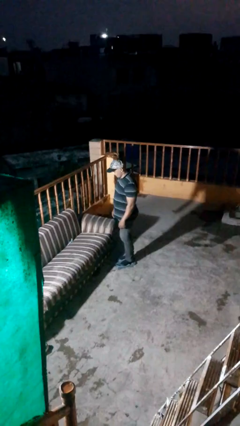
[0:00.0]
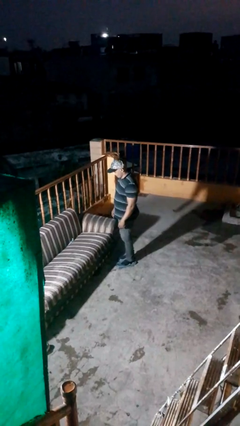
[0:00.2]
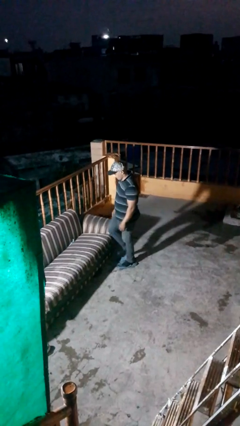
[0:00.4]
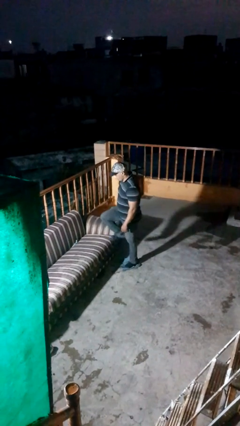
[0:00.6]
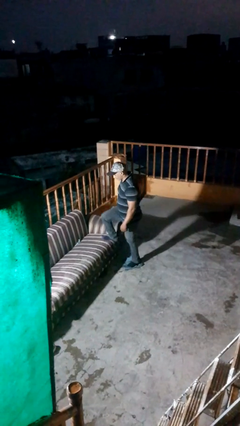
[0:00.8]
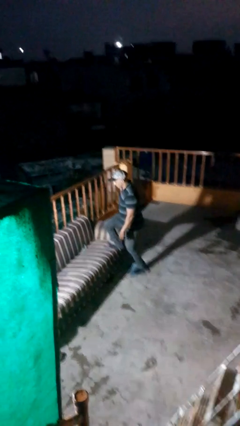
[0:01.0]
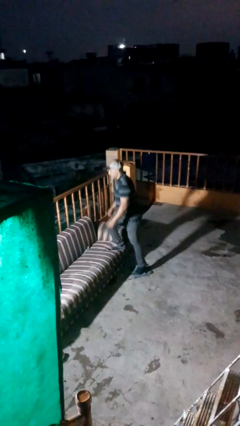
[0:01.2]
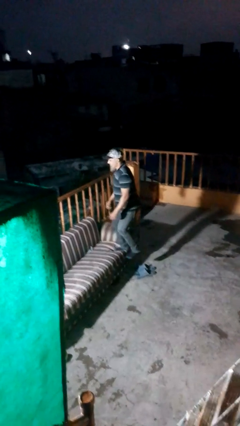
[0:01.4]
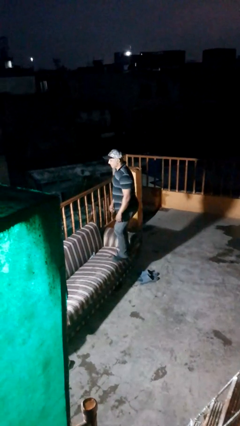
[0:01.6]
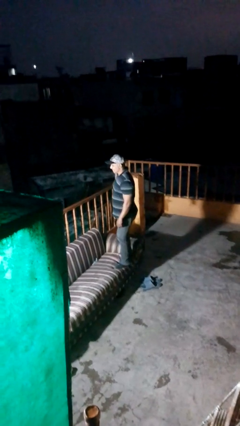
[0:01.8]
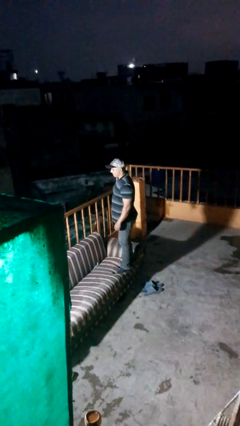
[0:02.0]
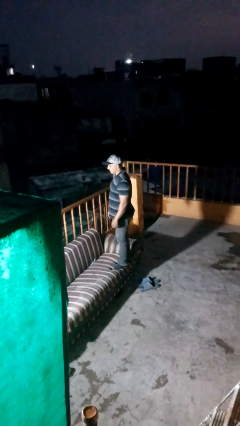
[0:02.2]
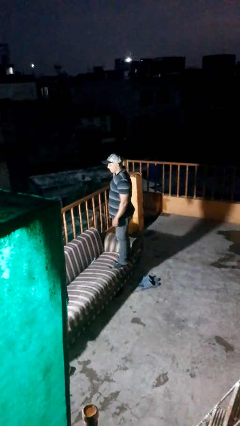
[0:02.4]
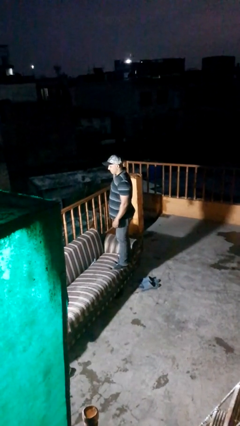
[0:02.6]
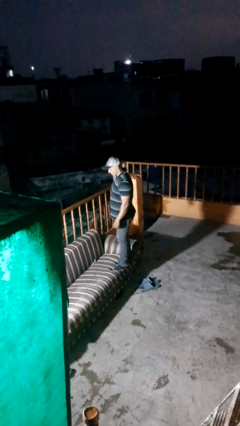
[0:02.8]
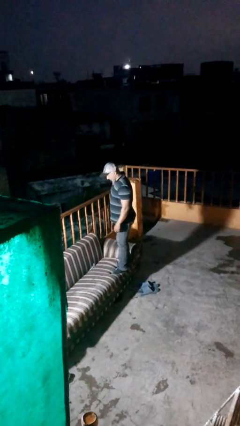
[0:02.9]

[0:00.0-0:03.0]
person climbs on couch

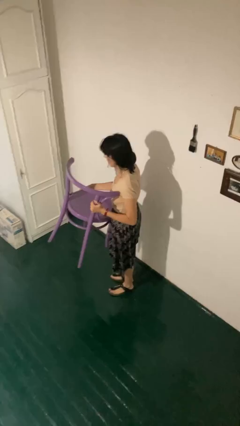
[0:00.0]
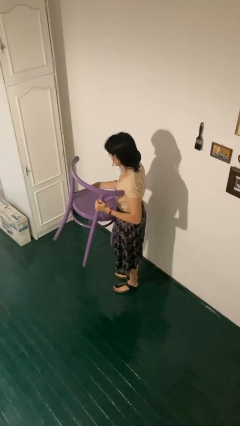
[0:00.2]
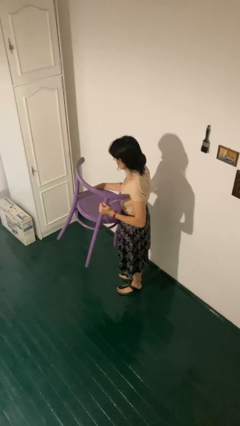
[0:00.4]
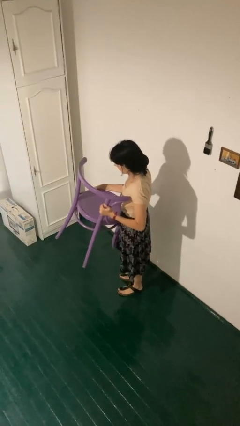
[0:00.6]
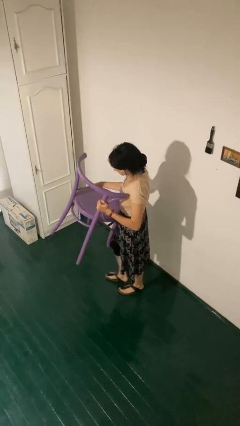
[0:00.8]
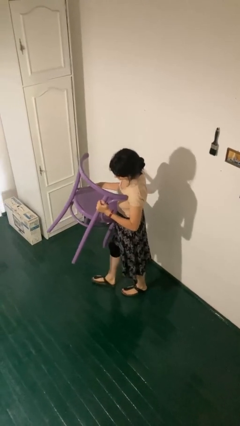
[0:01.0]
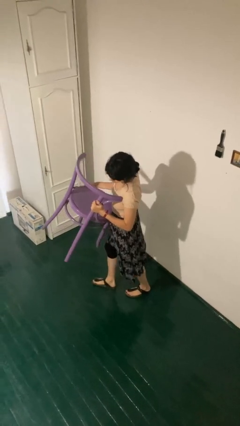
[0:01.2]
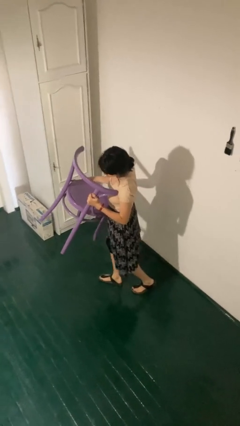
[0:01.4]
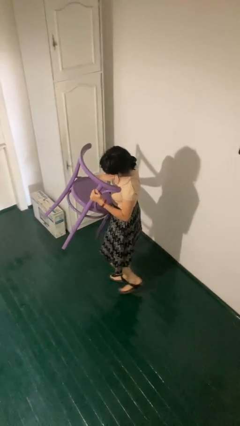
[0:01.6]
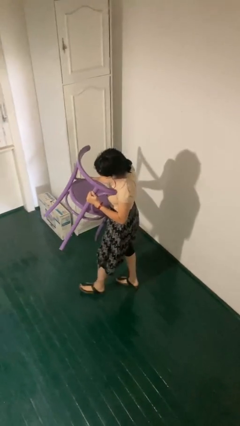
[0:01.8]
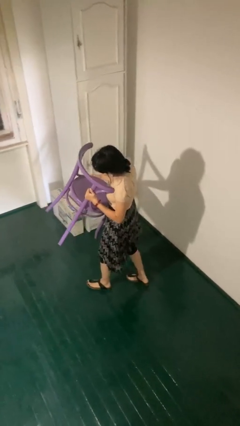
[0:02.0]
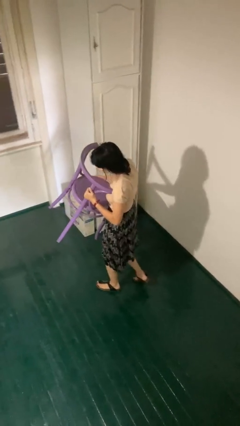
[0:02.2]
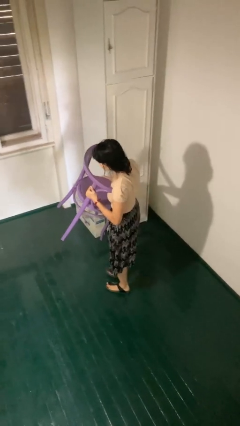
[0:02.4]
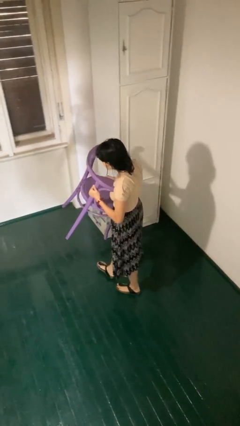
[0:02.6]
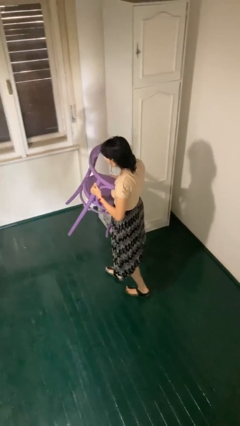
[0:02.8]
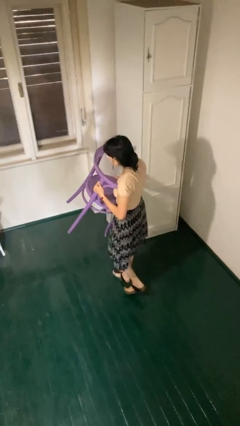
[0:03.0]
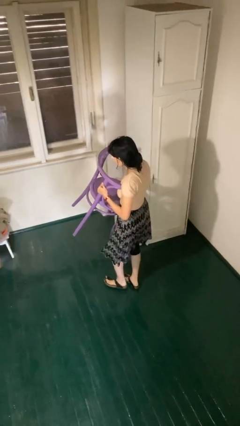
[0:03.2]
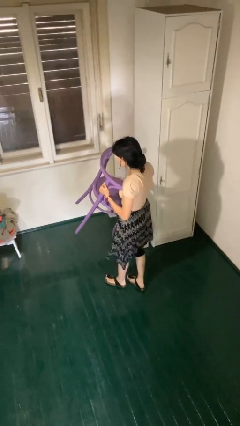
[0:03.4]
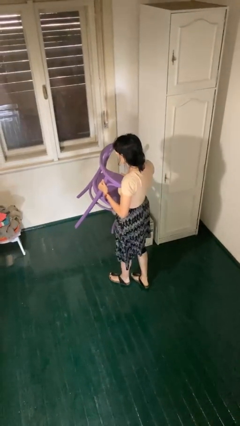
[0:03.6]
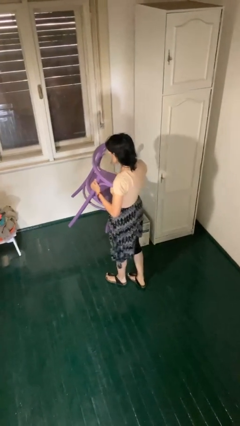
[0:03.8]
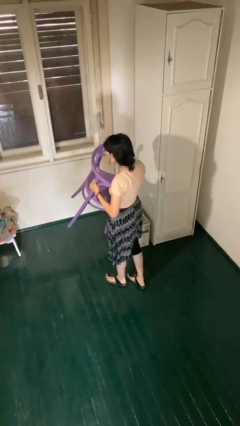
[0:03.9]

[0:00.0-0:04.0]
person carries furniture

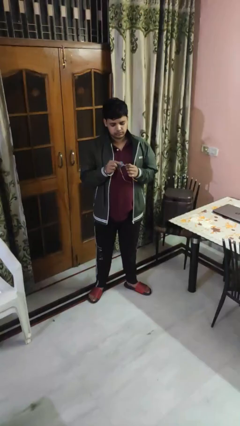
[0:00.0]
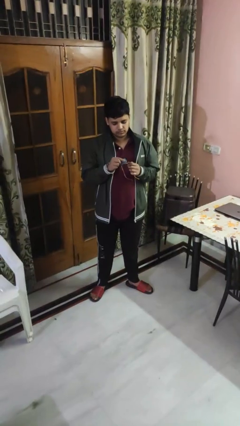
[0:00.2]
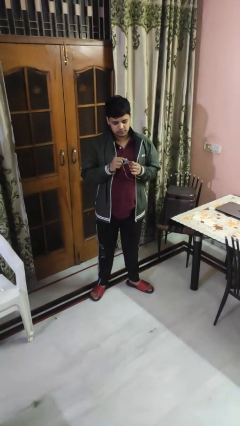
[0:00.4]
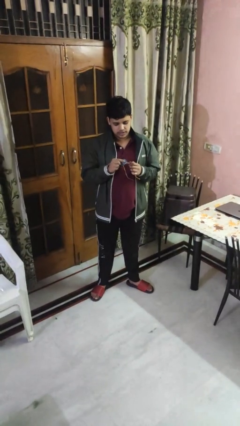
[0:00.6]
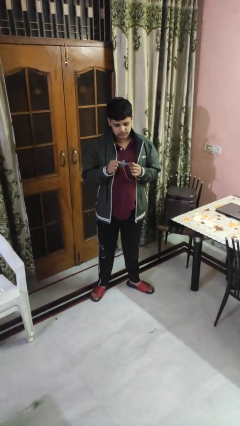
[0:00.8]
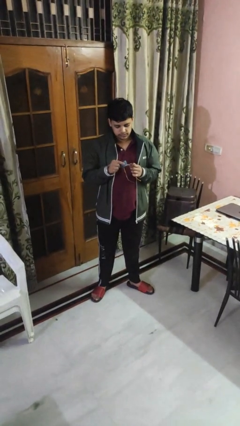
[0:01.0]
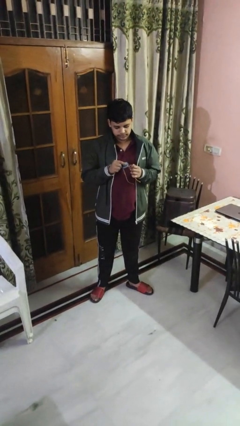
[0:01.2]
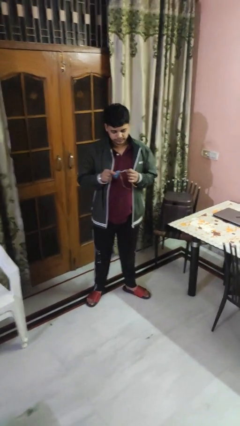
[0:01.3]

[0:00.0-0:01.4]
person cleans eyeglasses

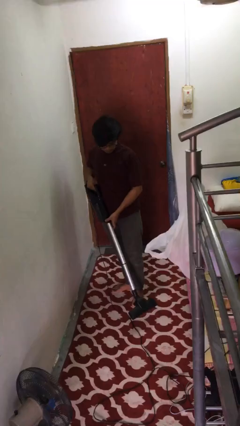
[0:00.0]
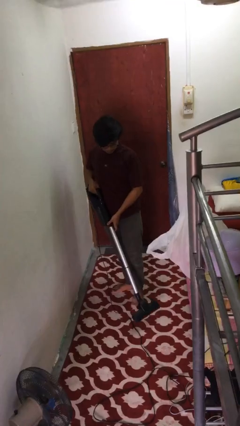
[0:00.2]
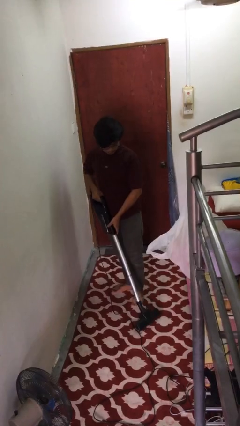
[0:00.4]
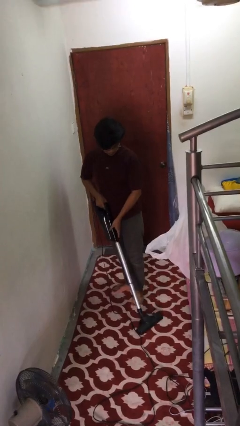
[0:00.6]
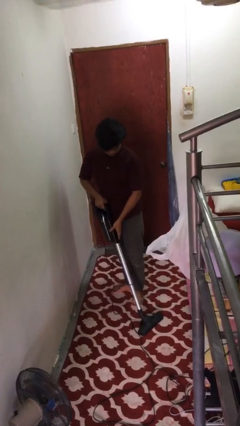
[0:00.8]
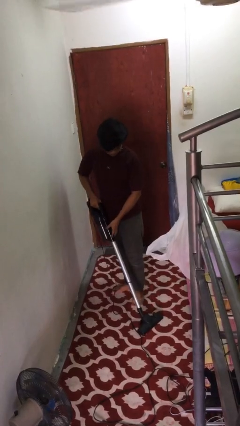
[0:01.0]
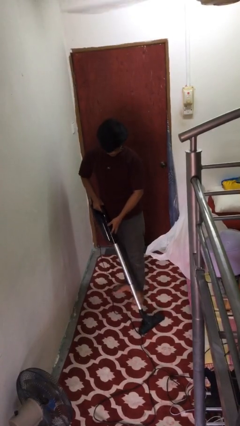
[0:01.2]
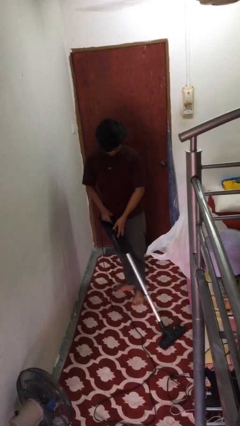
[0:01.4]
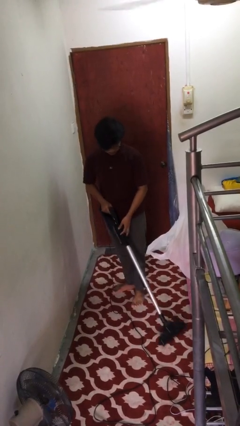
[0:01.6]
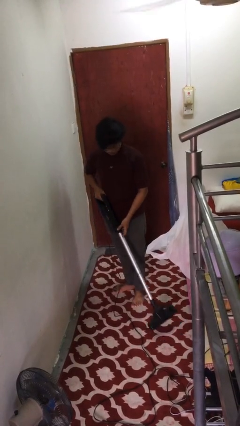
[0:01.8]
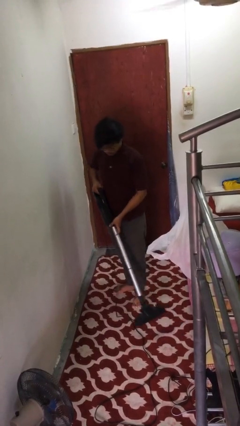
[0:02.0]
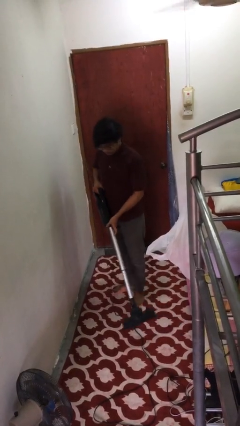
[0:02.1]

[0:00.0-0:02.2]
person vacuums carpet

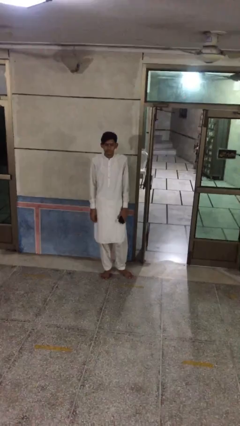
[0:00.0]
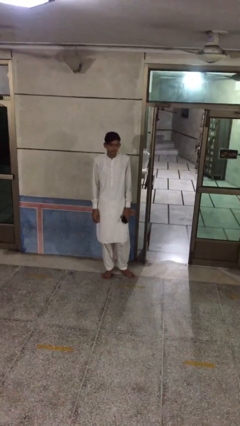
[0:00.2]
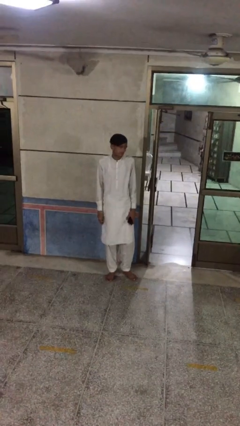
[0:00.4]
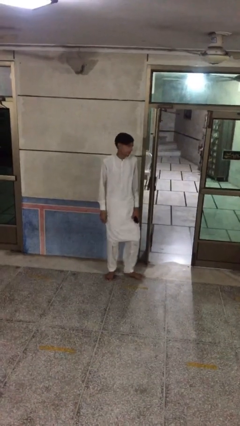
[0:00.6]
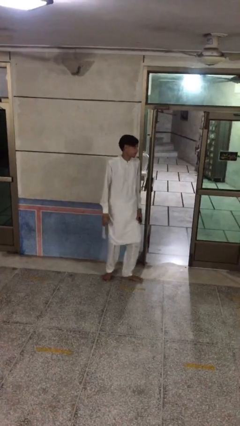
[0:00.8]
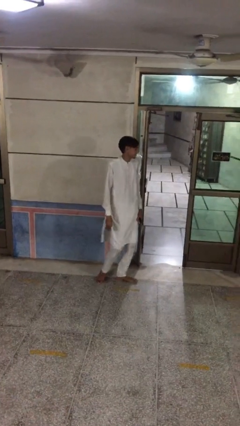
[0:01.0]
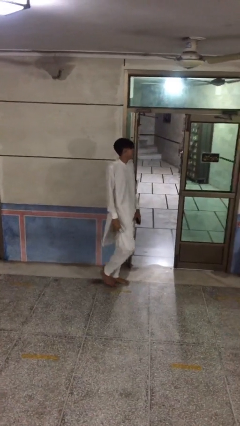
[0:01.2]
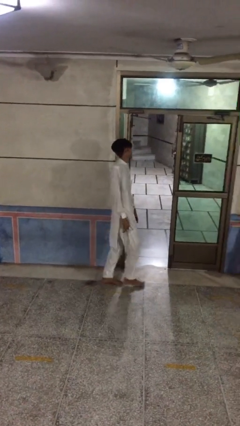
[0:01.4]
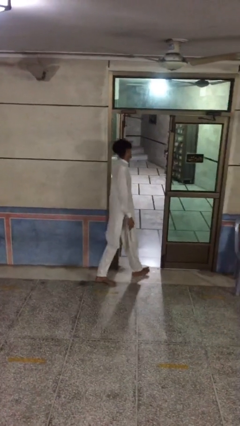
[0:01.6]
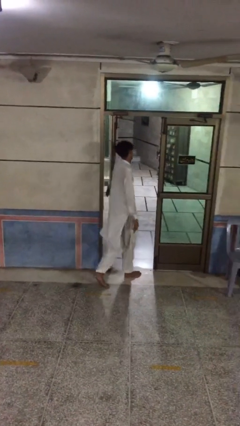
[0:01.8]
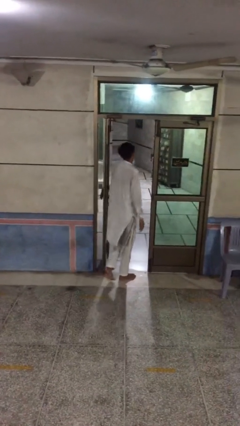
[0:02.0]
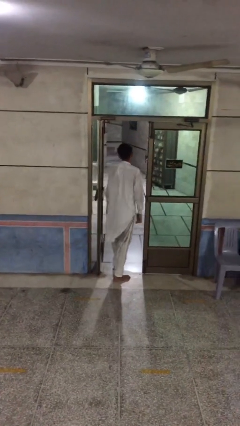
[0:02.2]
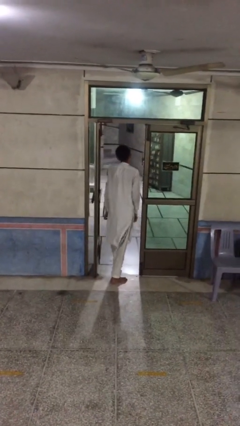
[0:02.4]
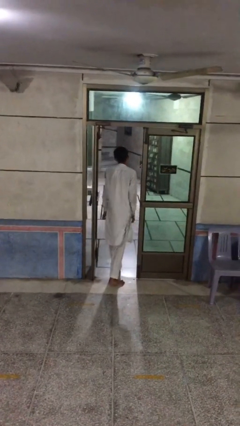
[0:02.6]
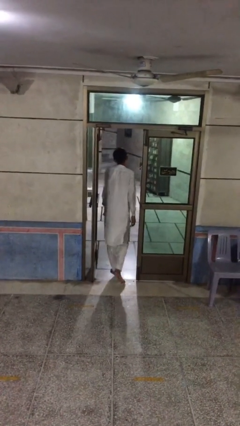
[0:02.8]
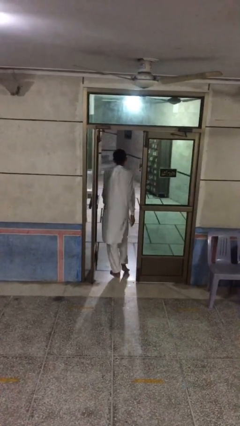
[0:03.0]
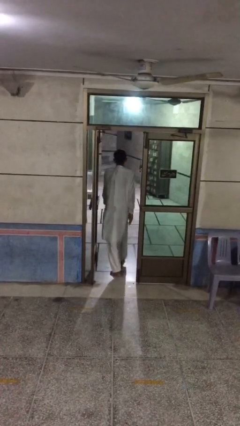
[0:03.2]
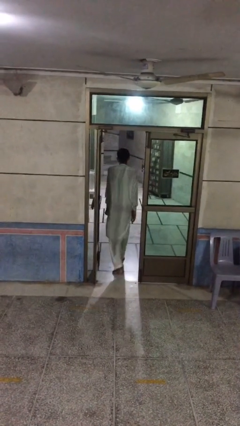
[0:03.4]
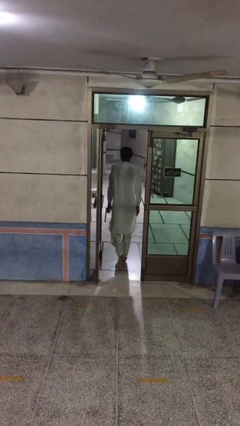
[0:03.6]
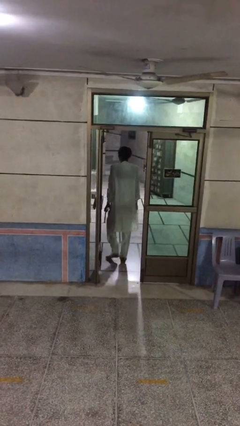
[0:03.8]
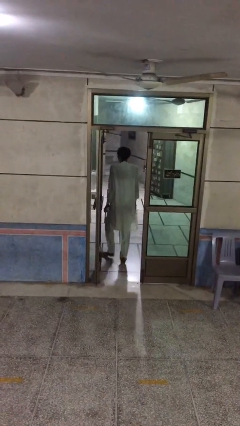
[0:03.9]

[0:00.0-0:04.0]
person exits scene through structure

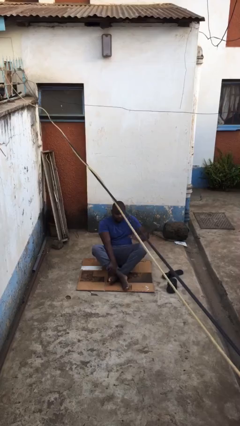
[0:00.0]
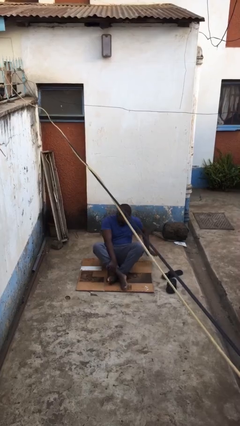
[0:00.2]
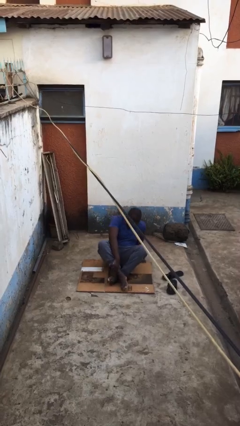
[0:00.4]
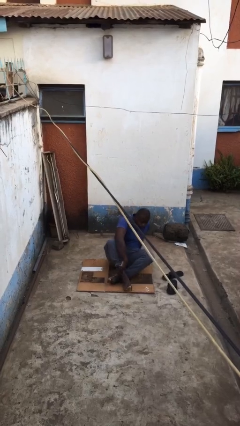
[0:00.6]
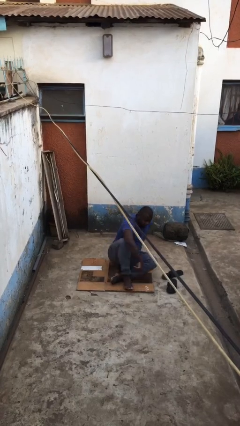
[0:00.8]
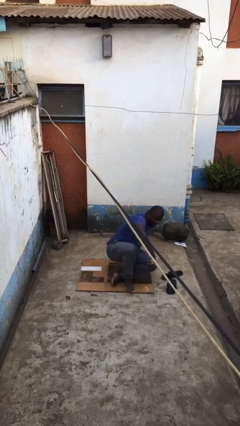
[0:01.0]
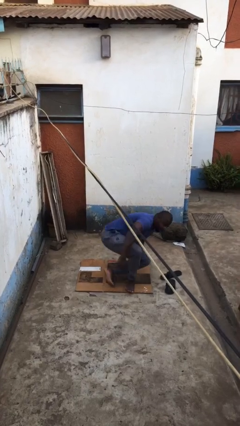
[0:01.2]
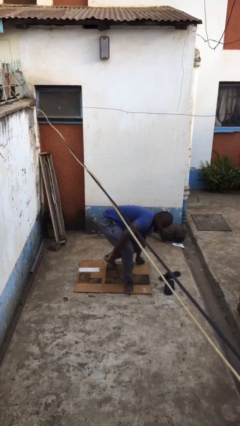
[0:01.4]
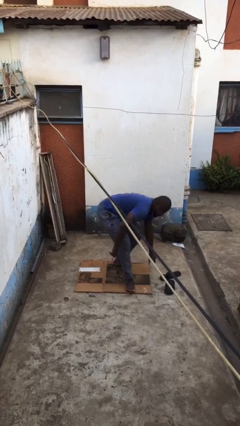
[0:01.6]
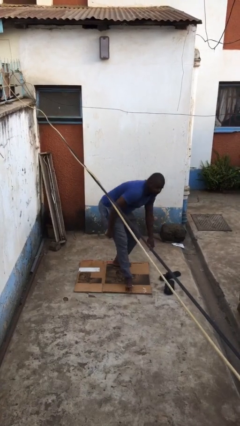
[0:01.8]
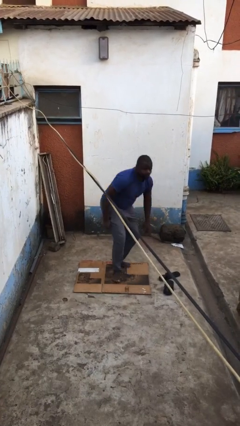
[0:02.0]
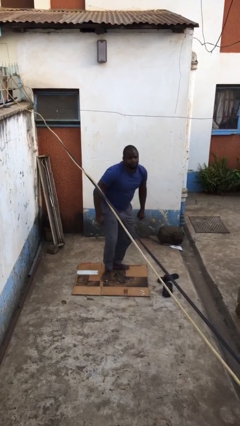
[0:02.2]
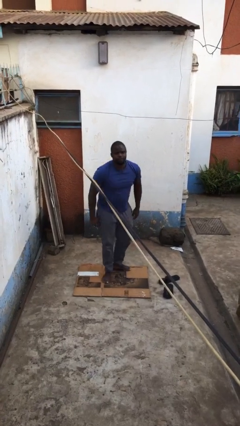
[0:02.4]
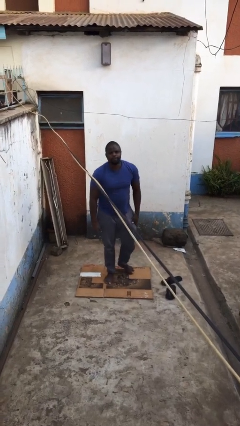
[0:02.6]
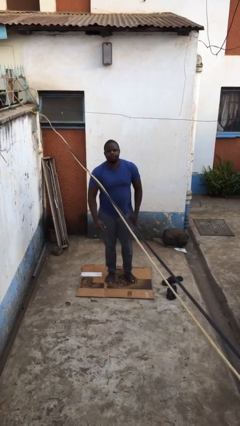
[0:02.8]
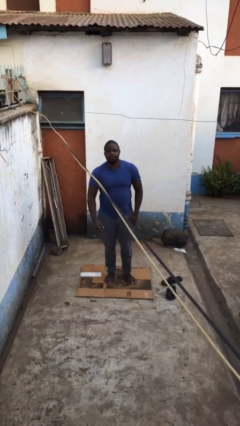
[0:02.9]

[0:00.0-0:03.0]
person stands up from floor
